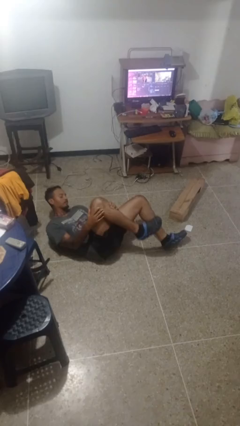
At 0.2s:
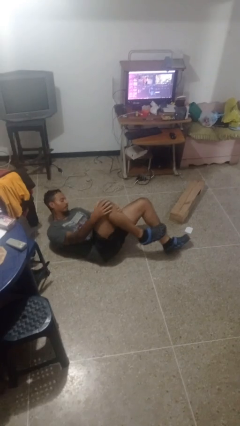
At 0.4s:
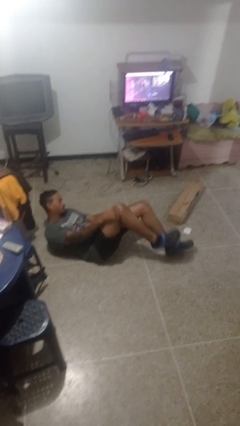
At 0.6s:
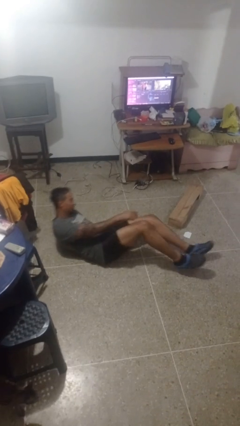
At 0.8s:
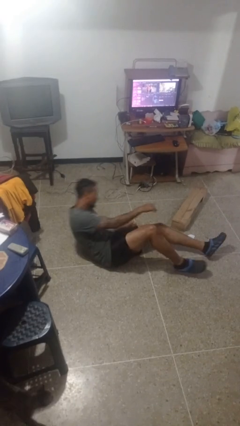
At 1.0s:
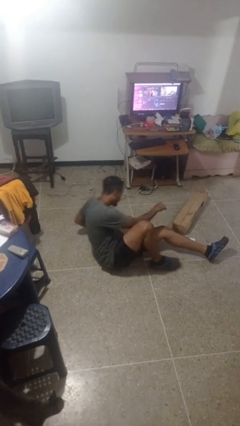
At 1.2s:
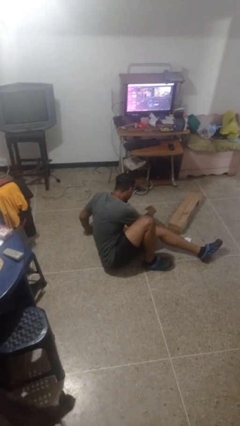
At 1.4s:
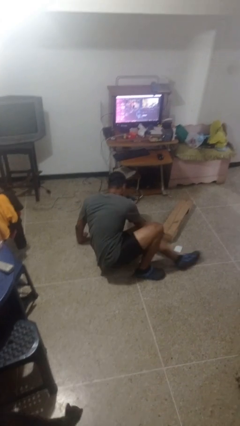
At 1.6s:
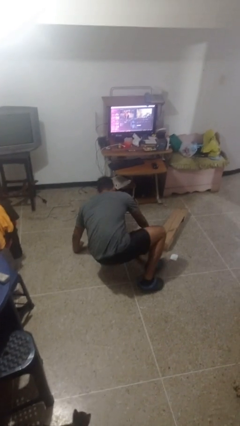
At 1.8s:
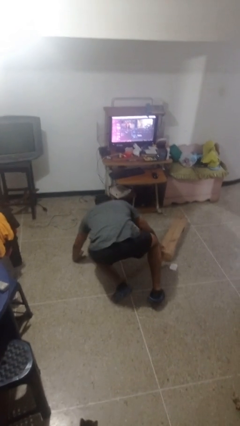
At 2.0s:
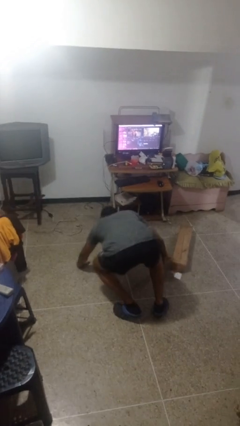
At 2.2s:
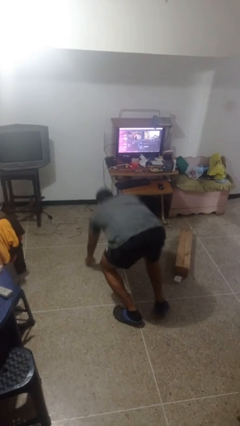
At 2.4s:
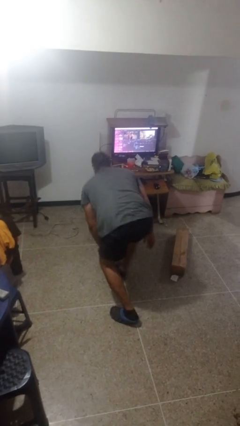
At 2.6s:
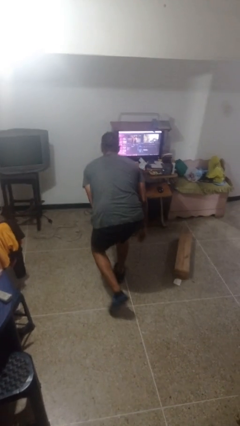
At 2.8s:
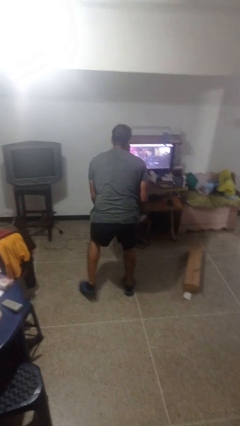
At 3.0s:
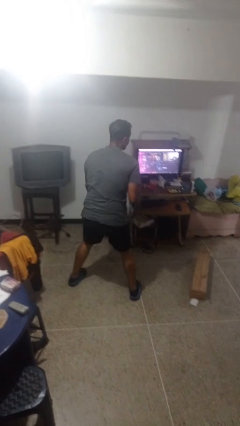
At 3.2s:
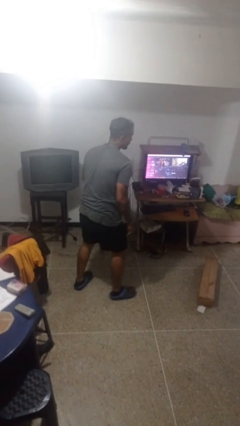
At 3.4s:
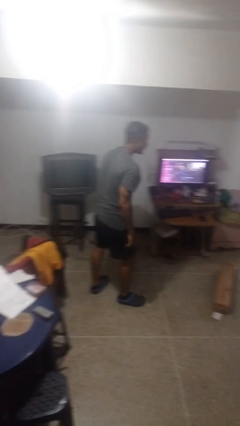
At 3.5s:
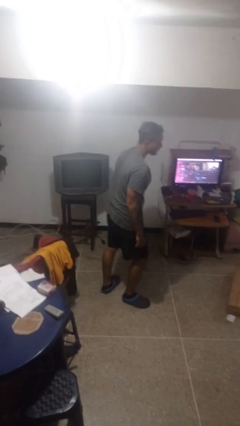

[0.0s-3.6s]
person stands up from floor

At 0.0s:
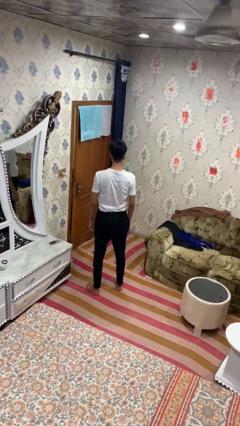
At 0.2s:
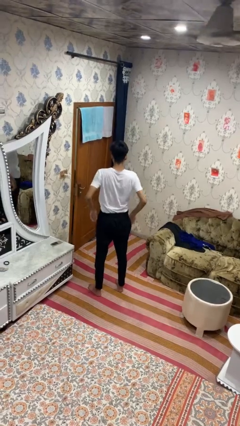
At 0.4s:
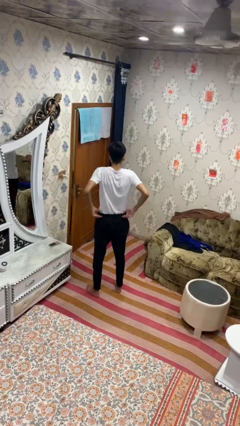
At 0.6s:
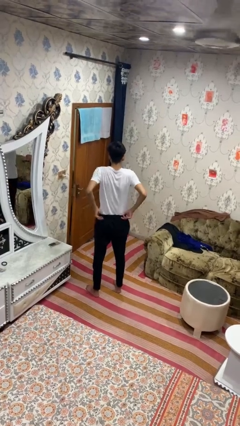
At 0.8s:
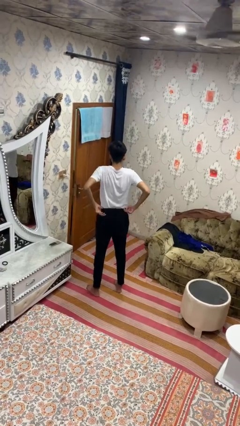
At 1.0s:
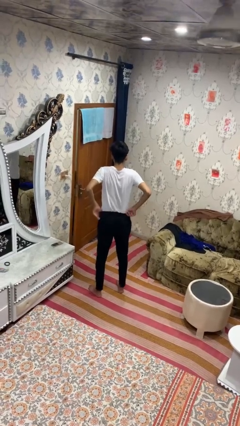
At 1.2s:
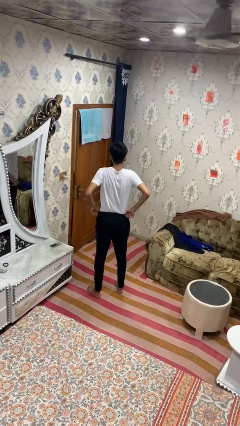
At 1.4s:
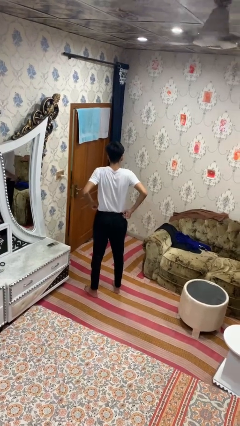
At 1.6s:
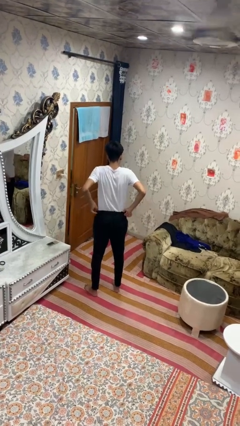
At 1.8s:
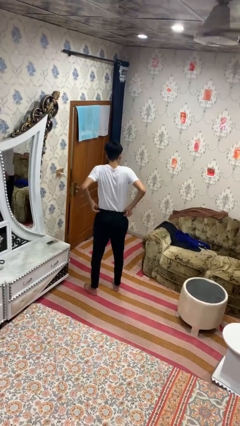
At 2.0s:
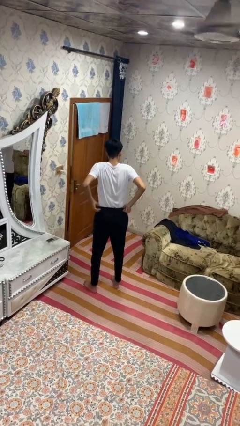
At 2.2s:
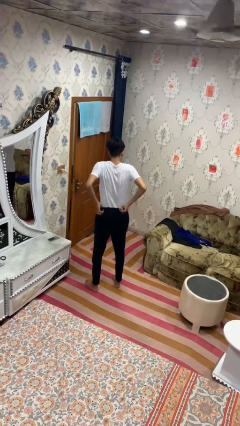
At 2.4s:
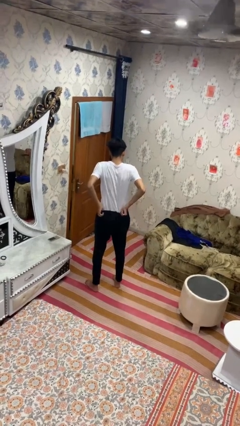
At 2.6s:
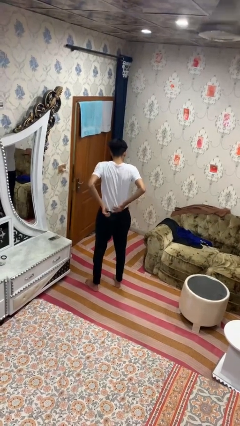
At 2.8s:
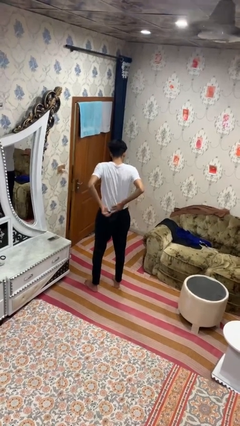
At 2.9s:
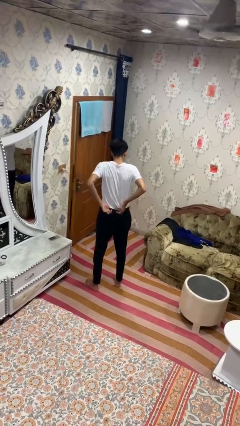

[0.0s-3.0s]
person hikes up pants

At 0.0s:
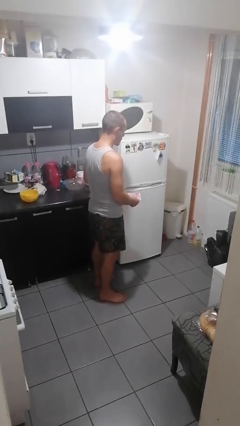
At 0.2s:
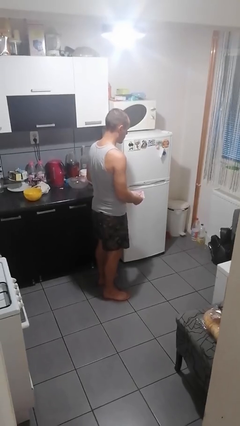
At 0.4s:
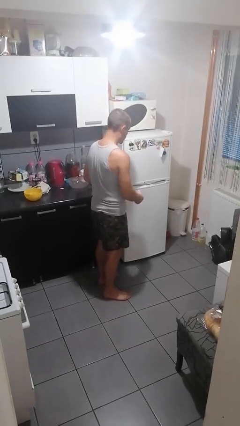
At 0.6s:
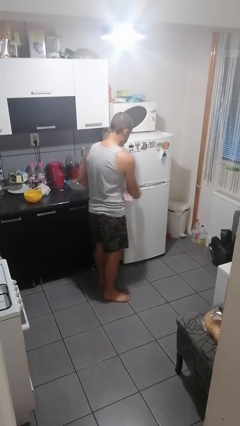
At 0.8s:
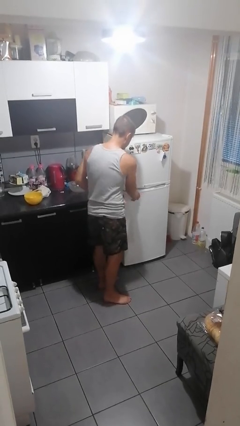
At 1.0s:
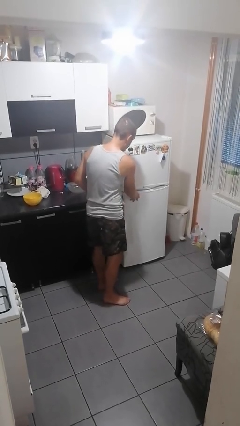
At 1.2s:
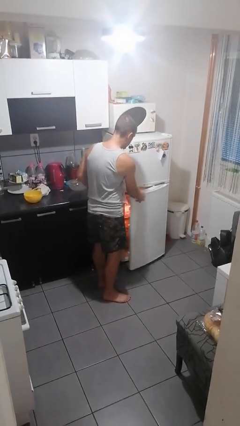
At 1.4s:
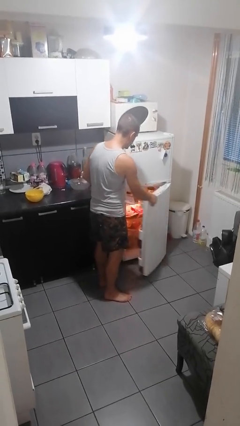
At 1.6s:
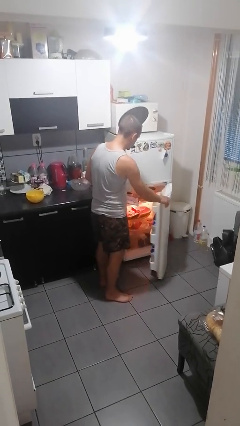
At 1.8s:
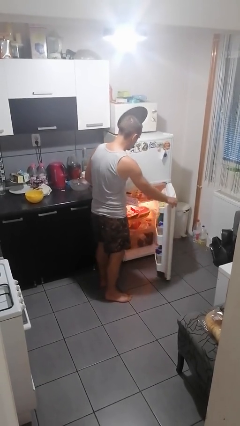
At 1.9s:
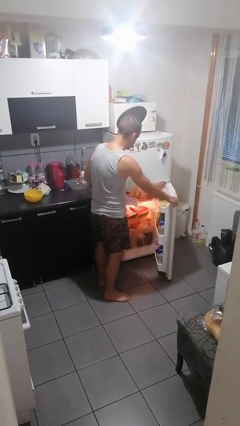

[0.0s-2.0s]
person opens refrigerator

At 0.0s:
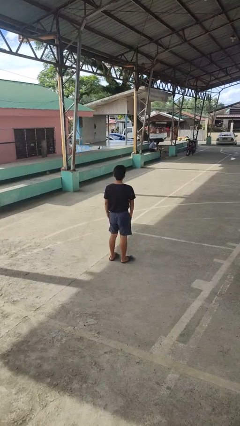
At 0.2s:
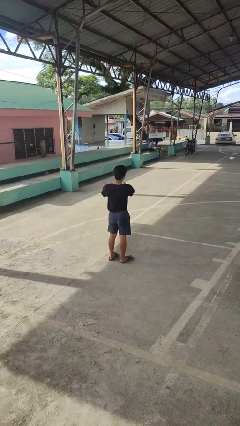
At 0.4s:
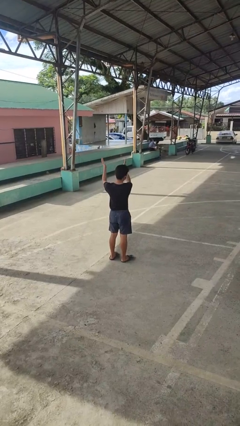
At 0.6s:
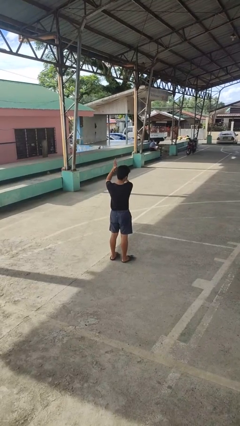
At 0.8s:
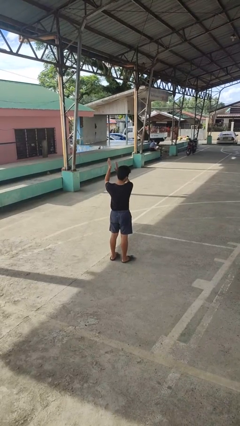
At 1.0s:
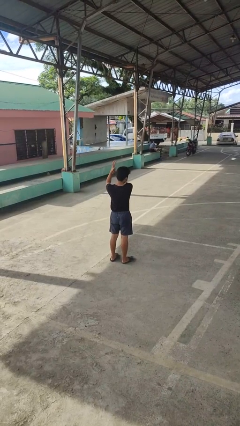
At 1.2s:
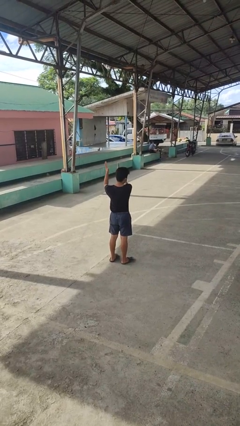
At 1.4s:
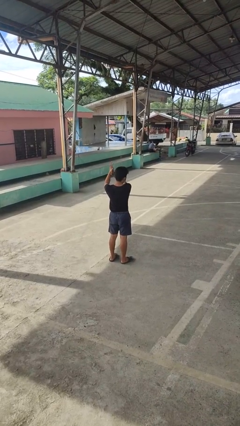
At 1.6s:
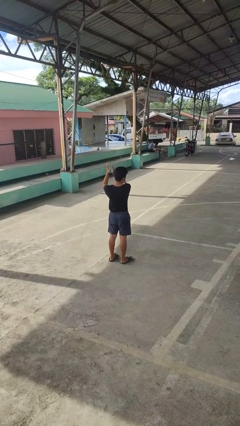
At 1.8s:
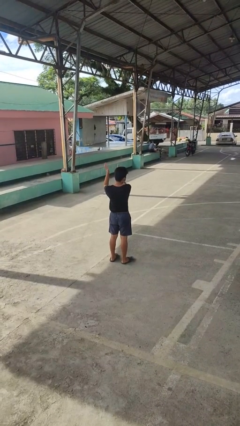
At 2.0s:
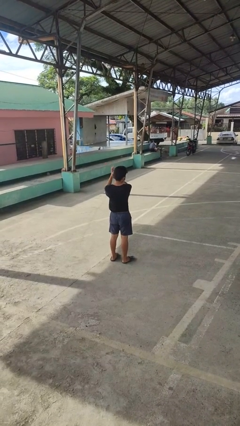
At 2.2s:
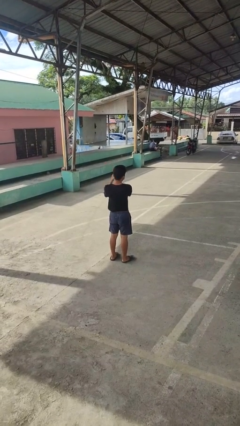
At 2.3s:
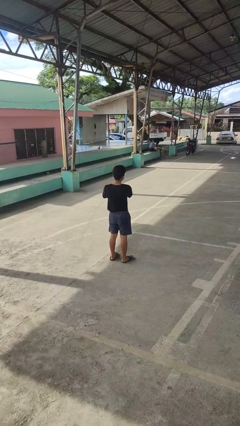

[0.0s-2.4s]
person claps hands

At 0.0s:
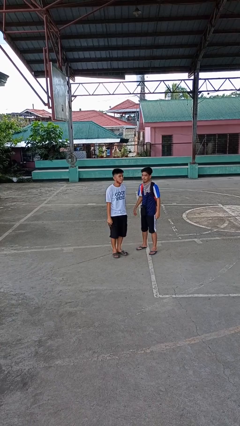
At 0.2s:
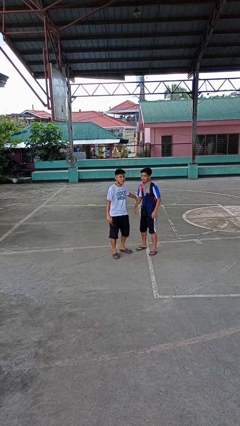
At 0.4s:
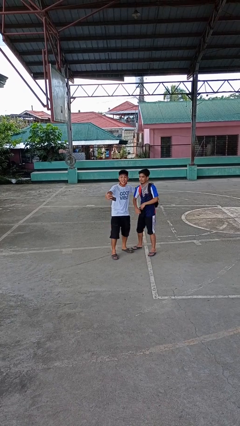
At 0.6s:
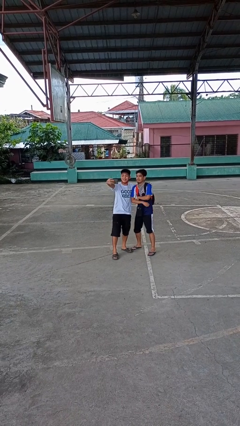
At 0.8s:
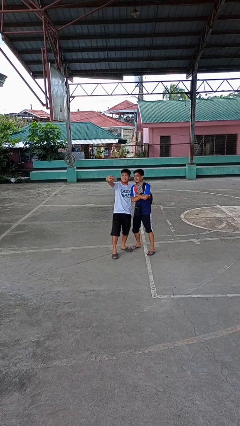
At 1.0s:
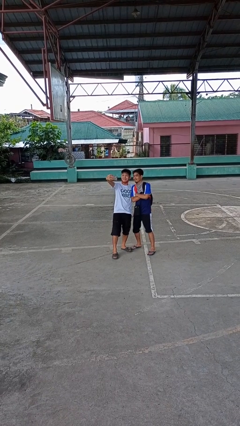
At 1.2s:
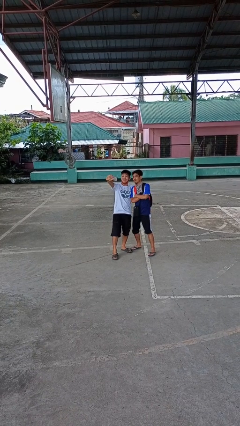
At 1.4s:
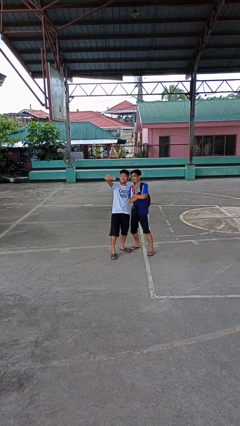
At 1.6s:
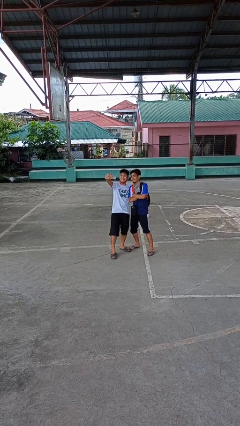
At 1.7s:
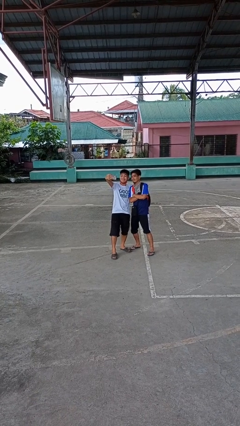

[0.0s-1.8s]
person takes selfie with person

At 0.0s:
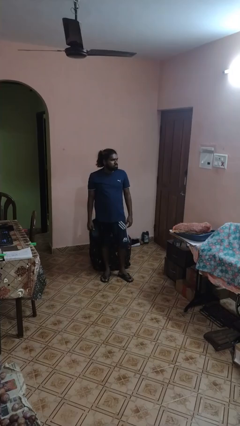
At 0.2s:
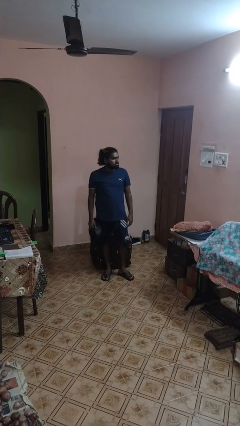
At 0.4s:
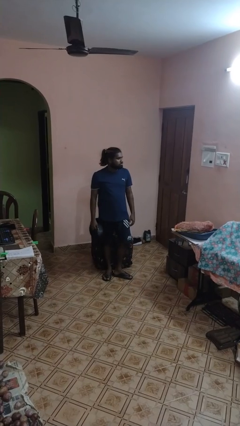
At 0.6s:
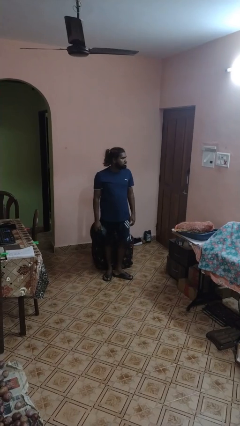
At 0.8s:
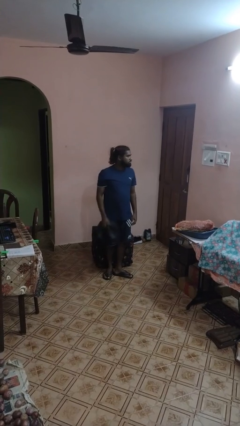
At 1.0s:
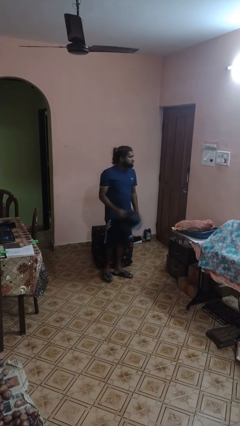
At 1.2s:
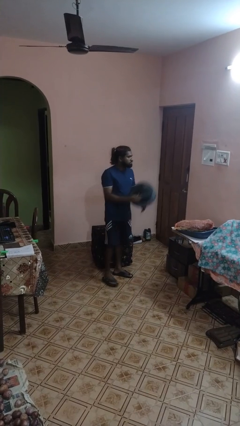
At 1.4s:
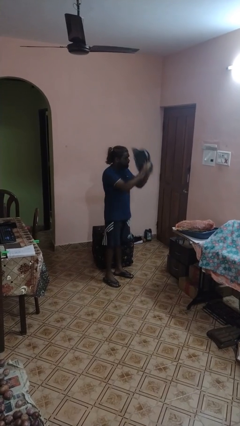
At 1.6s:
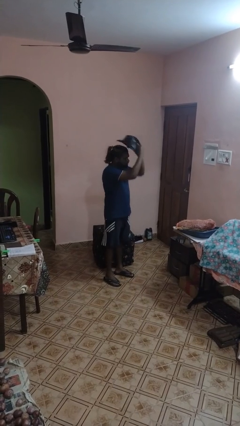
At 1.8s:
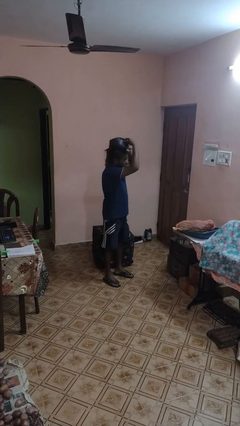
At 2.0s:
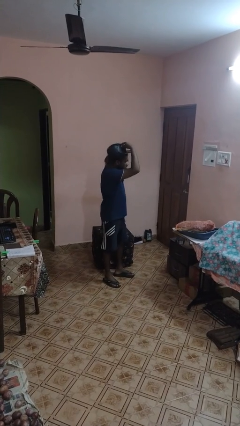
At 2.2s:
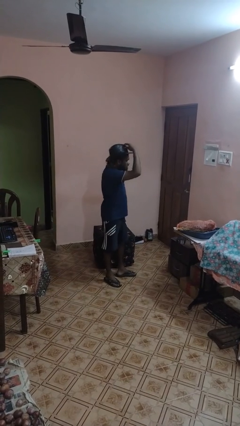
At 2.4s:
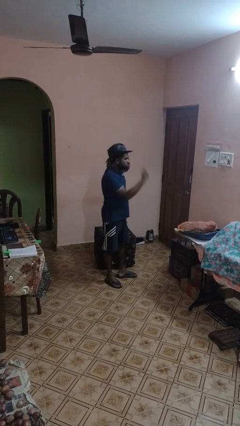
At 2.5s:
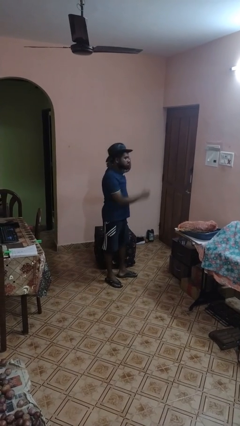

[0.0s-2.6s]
person takes off hat

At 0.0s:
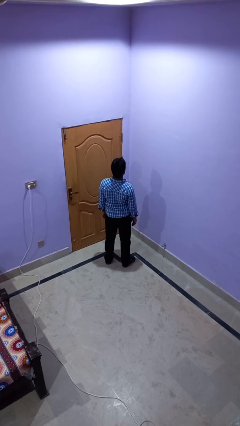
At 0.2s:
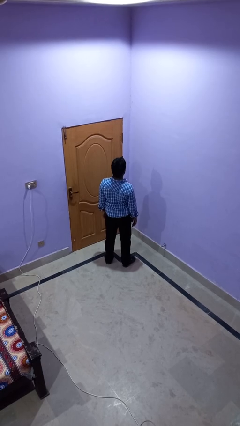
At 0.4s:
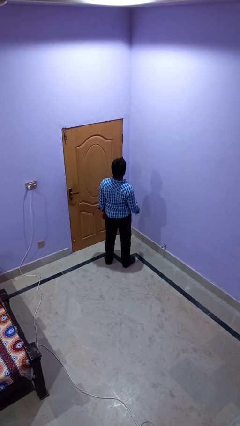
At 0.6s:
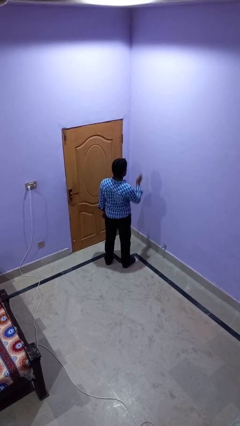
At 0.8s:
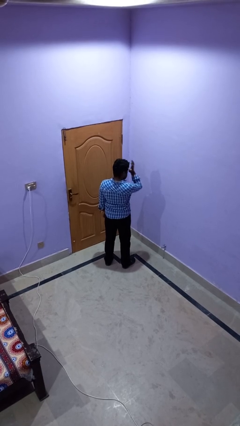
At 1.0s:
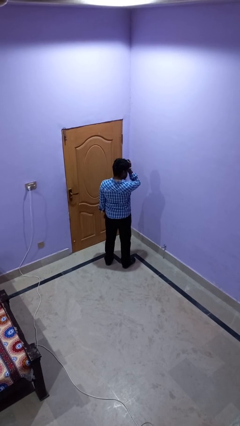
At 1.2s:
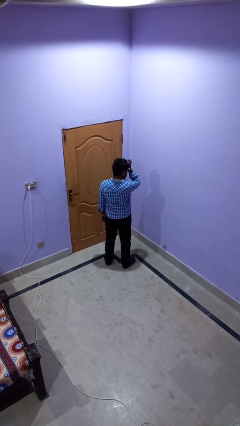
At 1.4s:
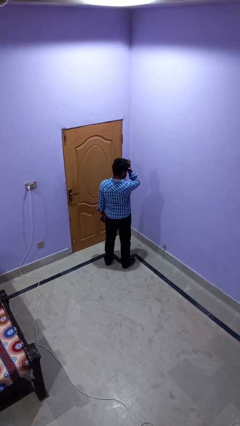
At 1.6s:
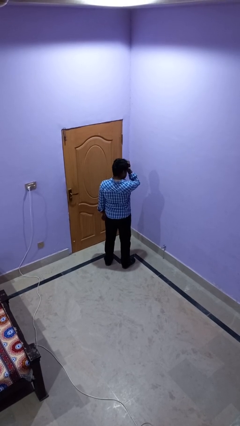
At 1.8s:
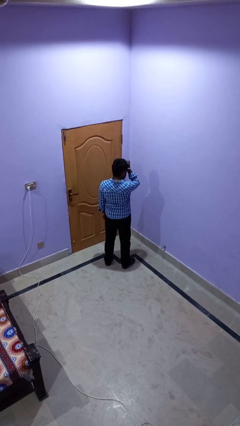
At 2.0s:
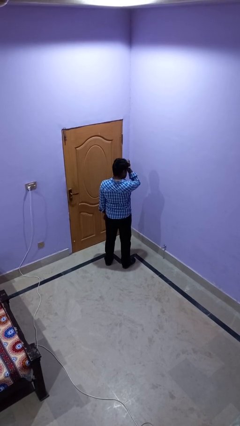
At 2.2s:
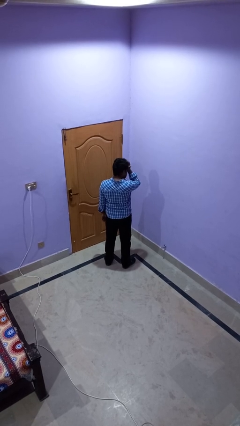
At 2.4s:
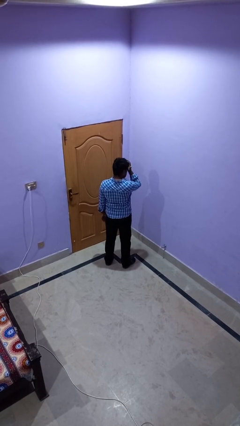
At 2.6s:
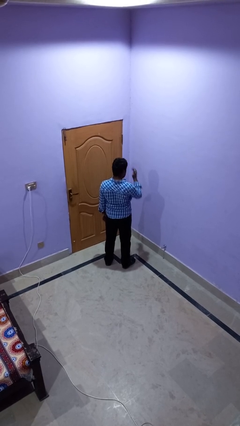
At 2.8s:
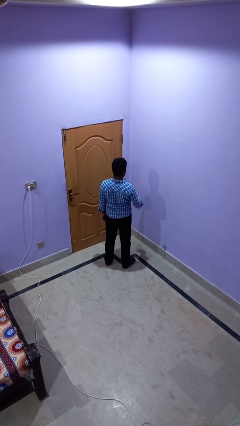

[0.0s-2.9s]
person rubs eyes
